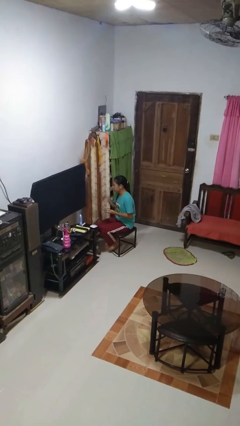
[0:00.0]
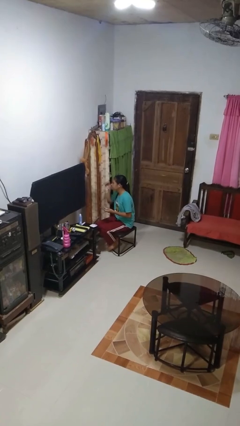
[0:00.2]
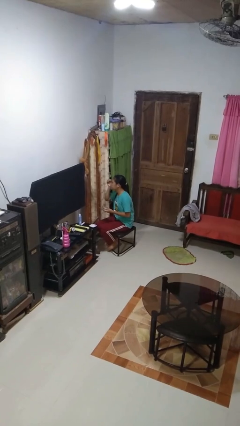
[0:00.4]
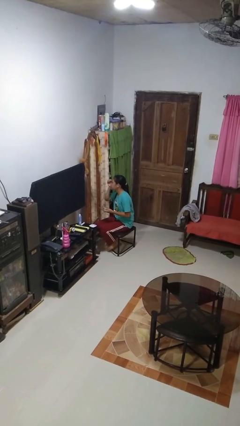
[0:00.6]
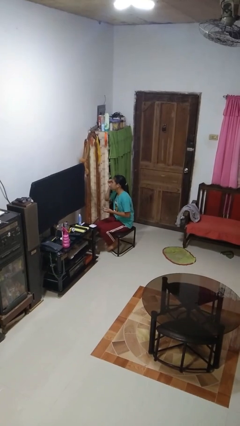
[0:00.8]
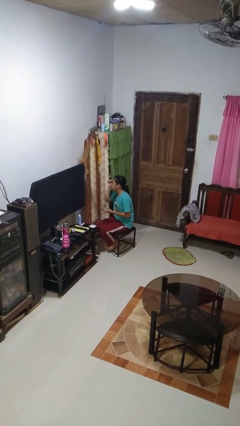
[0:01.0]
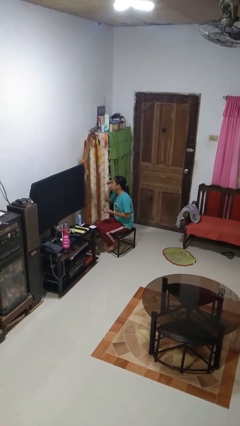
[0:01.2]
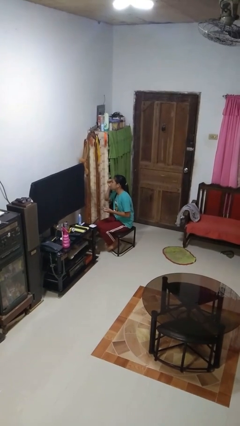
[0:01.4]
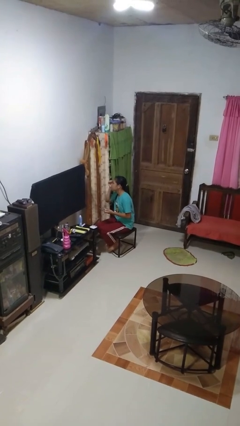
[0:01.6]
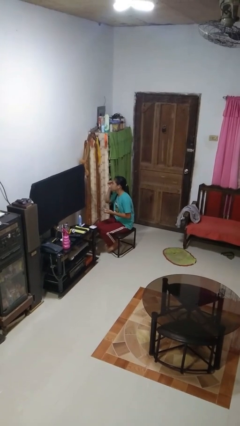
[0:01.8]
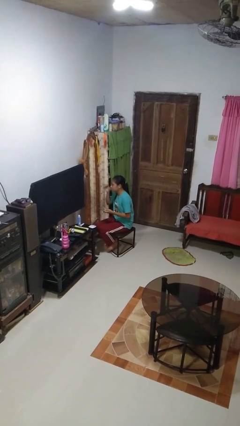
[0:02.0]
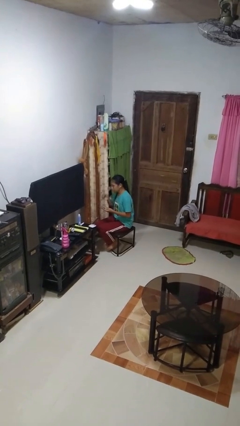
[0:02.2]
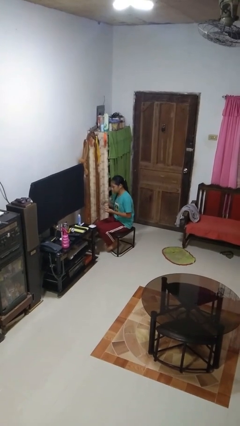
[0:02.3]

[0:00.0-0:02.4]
person applies eye makeup

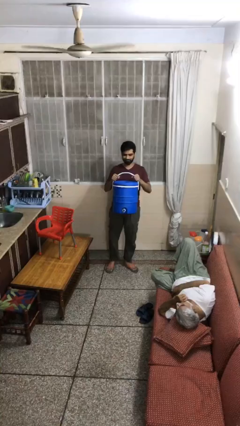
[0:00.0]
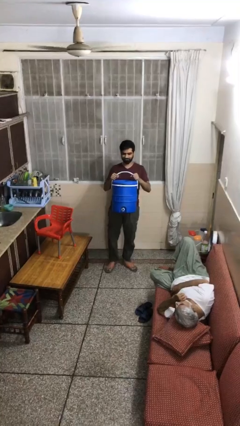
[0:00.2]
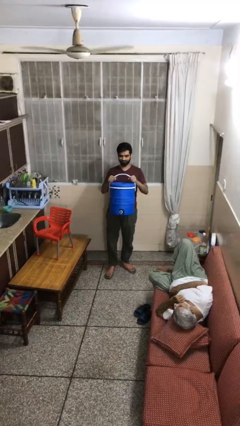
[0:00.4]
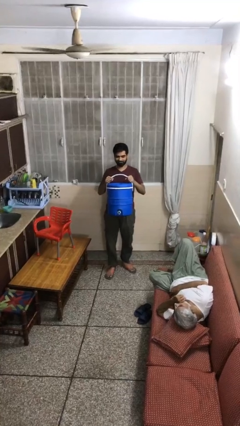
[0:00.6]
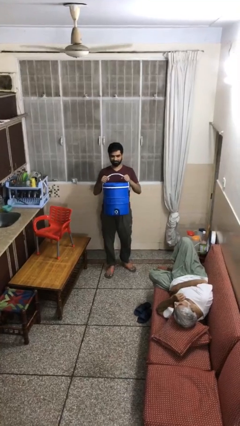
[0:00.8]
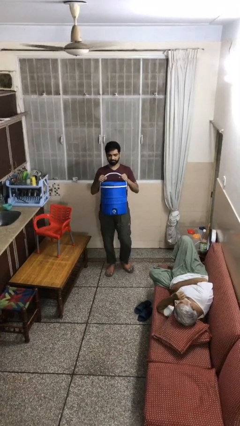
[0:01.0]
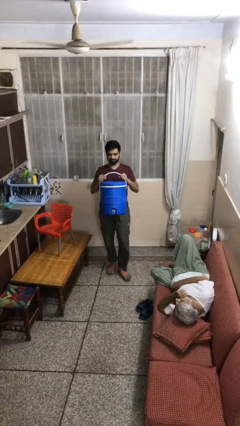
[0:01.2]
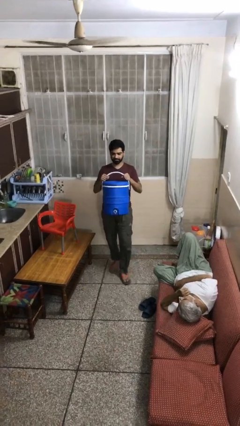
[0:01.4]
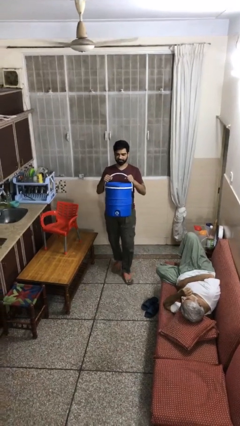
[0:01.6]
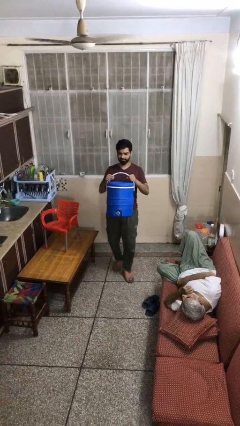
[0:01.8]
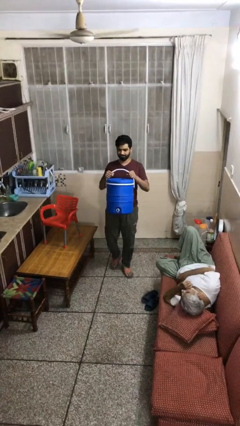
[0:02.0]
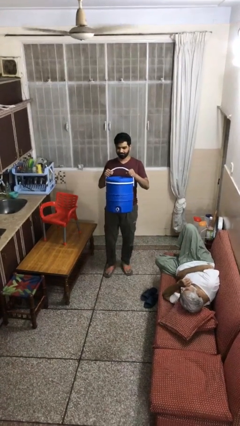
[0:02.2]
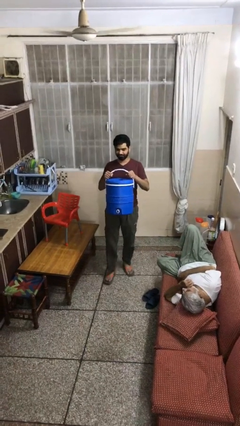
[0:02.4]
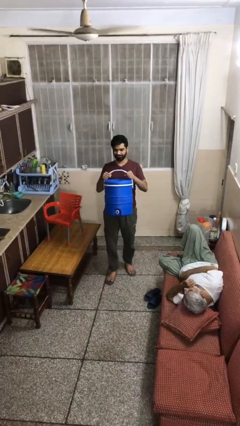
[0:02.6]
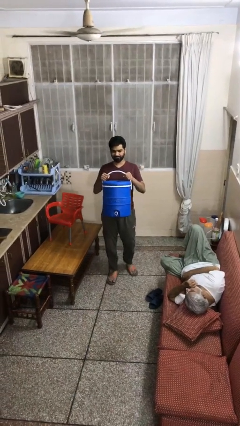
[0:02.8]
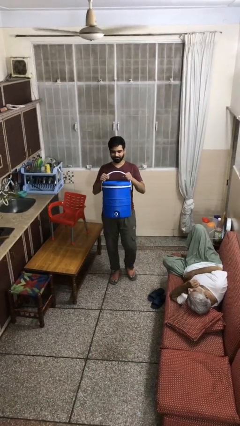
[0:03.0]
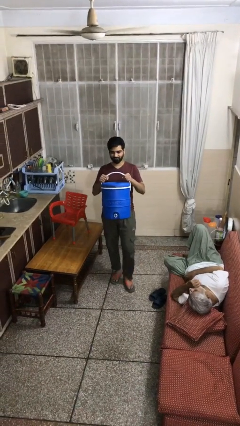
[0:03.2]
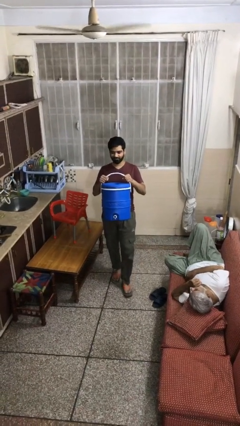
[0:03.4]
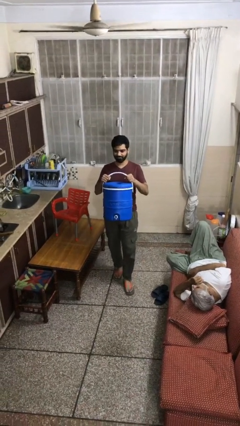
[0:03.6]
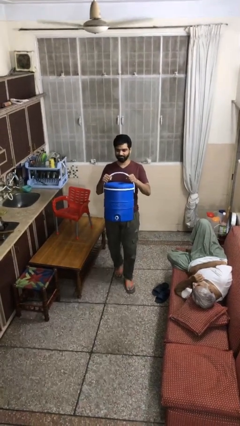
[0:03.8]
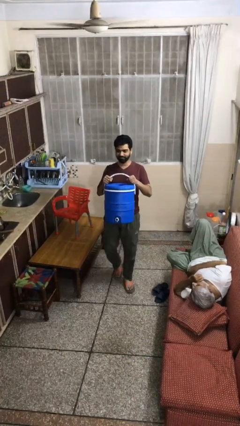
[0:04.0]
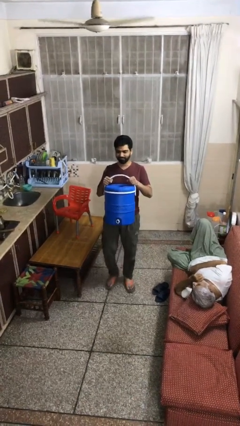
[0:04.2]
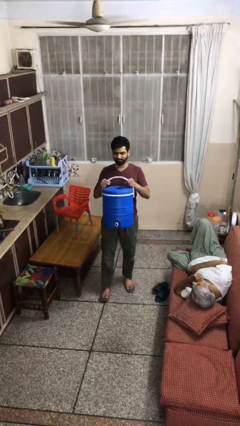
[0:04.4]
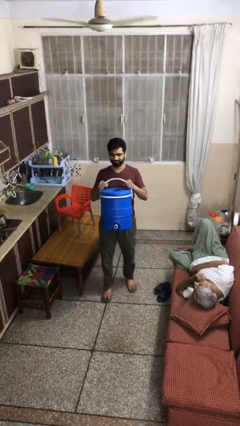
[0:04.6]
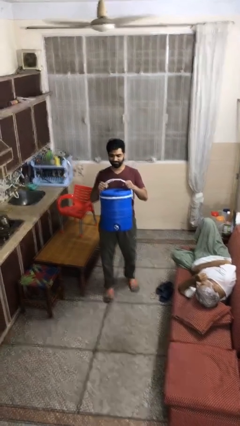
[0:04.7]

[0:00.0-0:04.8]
person carries heavy object

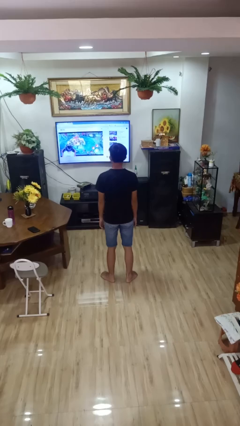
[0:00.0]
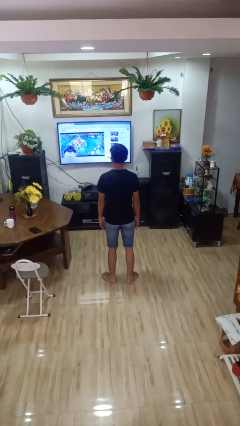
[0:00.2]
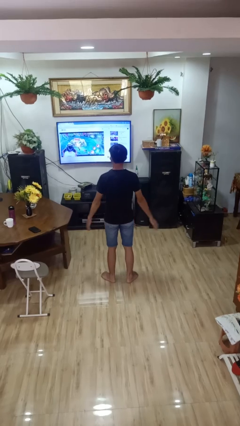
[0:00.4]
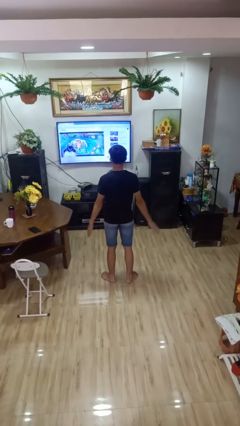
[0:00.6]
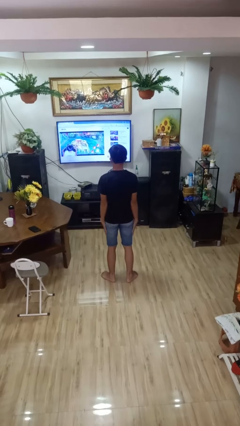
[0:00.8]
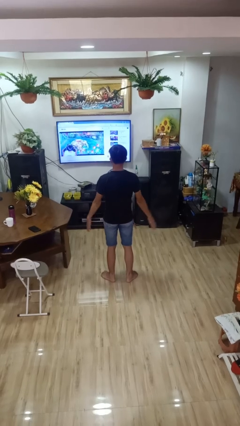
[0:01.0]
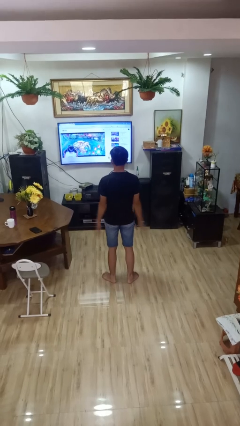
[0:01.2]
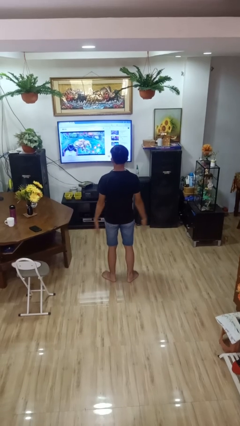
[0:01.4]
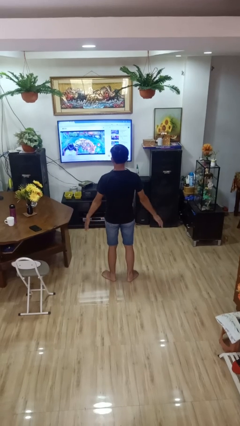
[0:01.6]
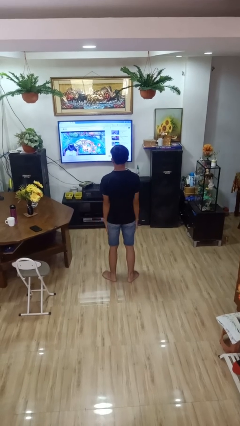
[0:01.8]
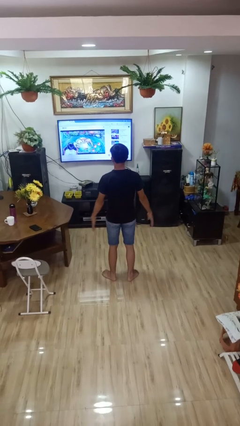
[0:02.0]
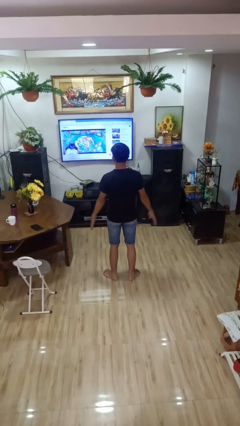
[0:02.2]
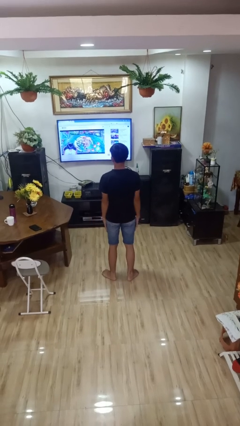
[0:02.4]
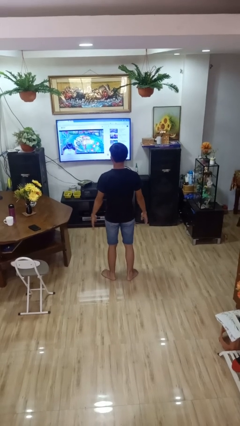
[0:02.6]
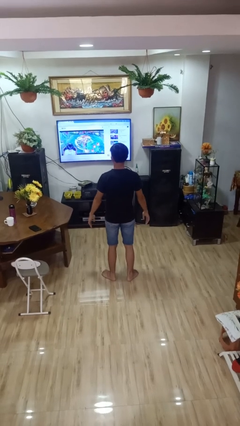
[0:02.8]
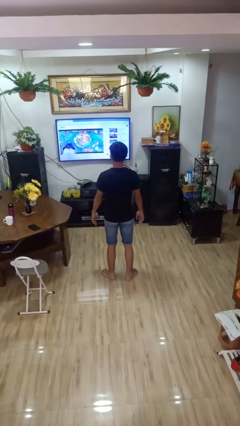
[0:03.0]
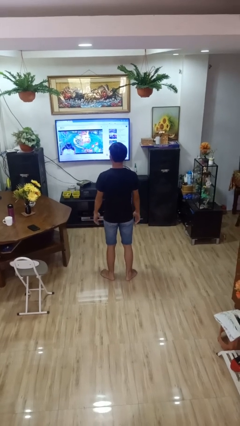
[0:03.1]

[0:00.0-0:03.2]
person slaps hands on thighs

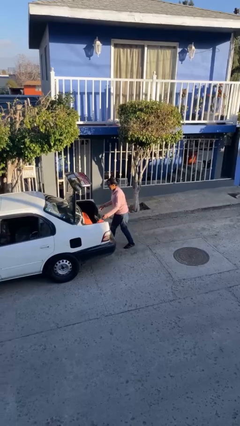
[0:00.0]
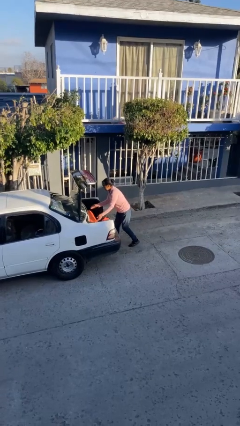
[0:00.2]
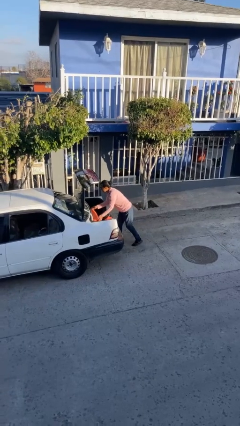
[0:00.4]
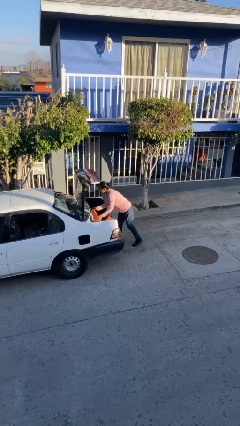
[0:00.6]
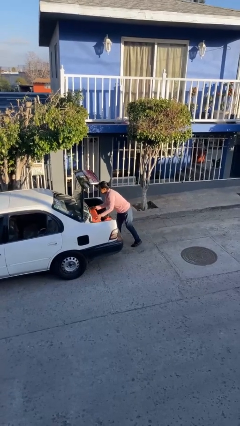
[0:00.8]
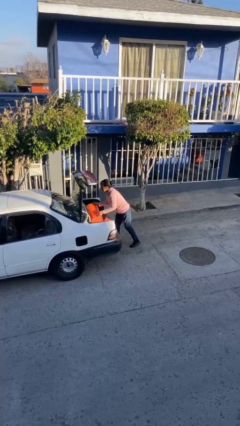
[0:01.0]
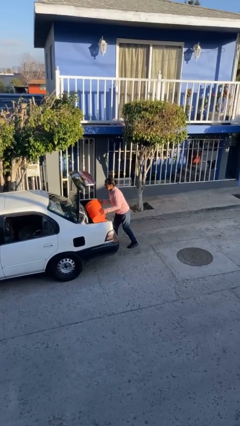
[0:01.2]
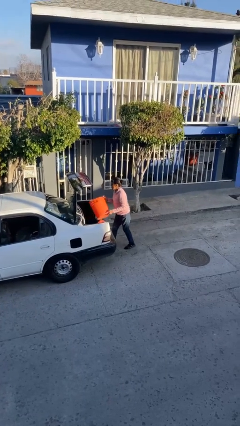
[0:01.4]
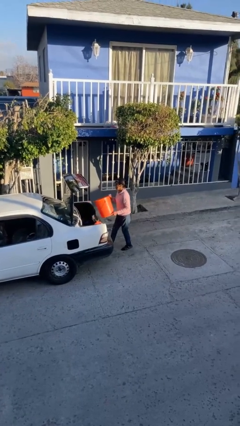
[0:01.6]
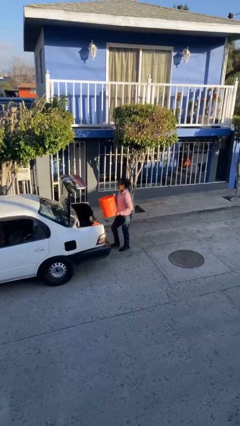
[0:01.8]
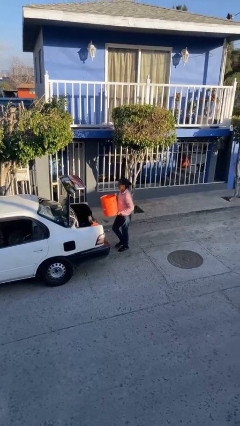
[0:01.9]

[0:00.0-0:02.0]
person unloads car

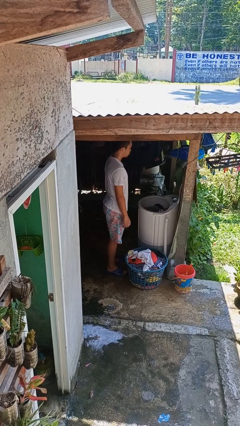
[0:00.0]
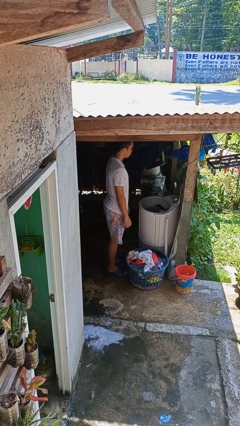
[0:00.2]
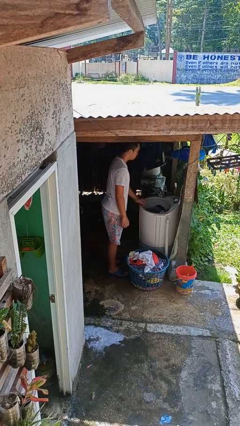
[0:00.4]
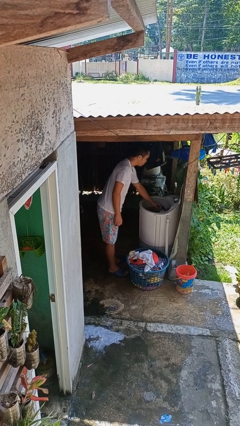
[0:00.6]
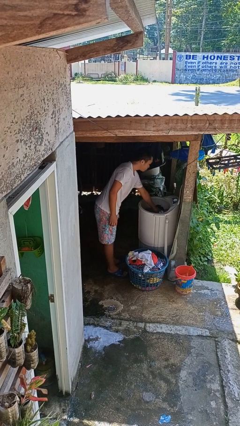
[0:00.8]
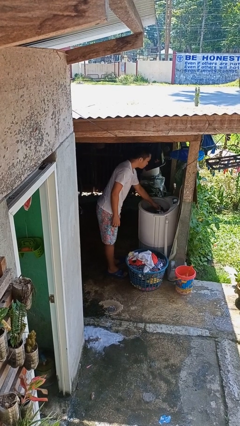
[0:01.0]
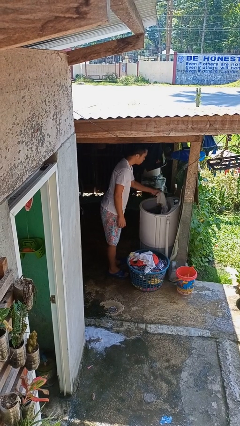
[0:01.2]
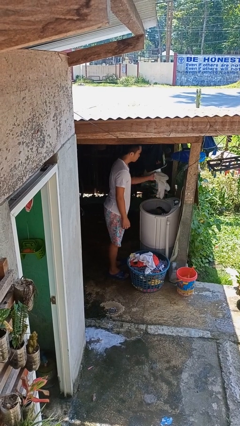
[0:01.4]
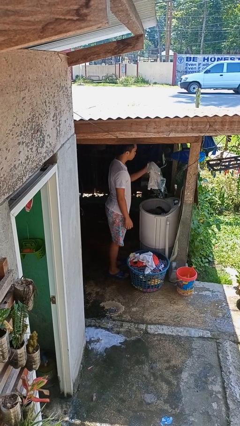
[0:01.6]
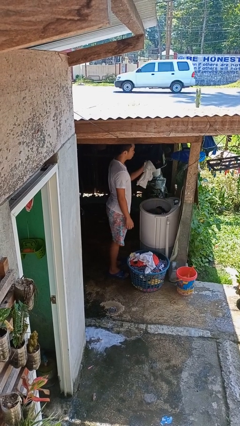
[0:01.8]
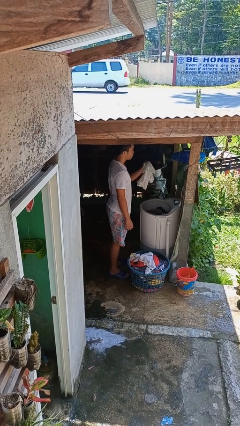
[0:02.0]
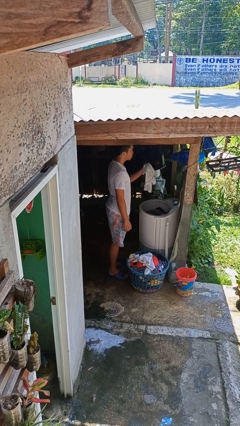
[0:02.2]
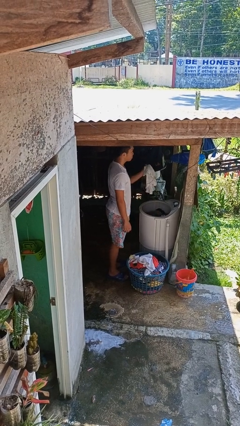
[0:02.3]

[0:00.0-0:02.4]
person unloads clotheswasher

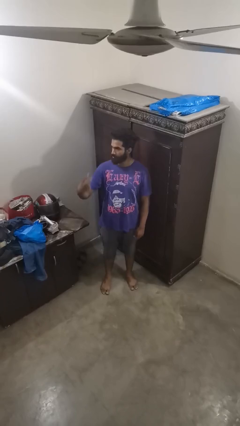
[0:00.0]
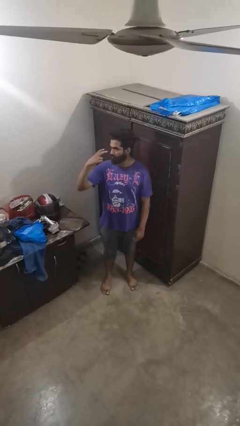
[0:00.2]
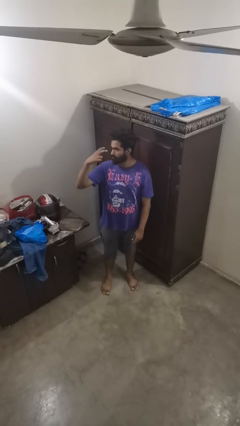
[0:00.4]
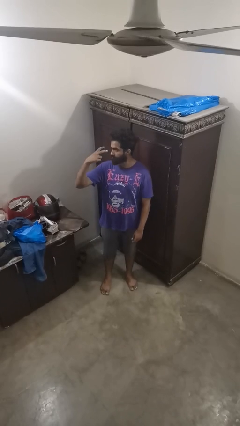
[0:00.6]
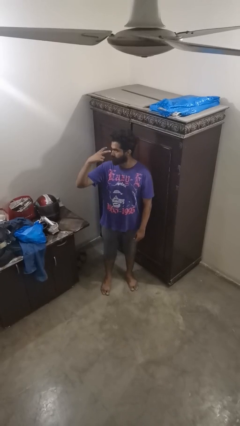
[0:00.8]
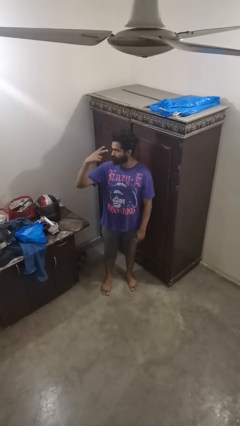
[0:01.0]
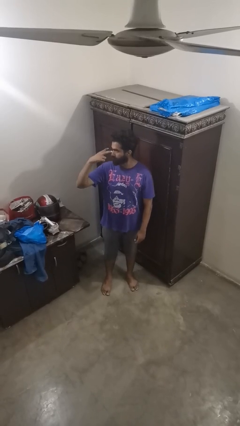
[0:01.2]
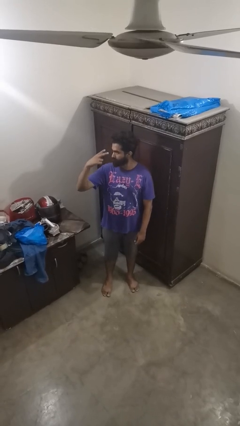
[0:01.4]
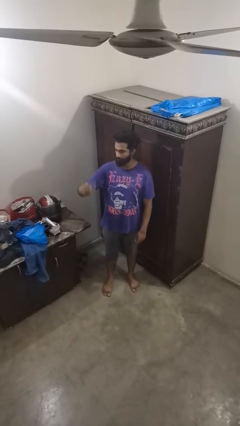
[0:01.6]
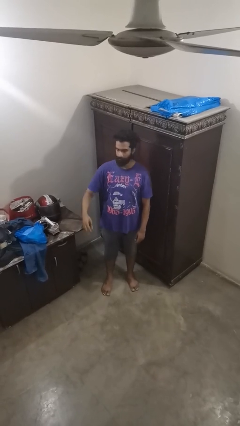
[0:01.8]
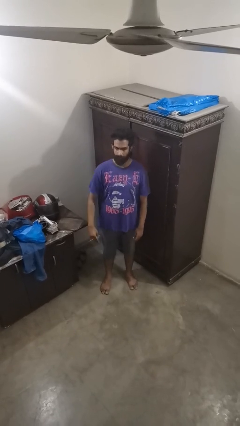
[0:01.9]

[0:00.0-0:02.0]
person gestures watch closely

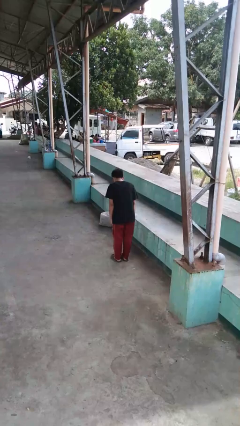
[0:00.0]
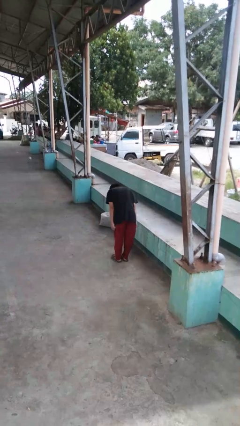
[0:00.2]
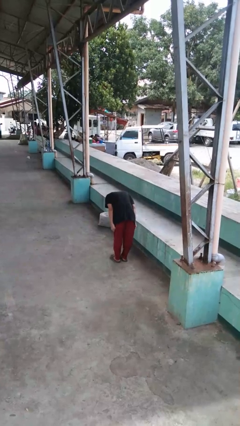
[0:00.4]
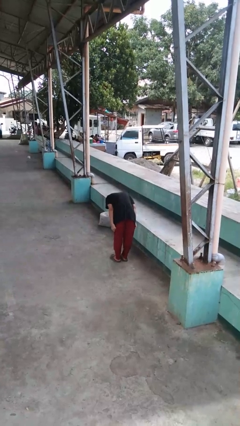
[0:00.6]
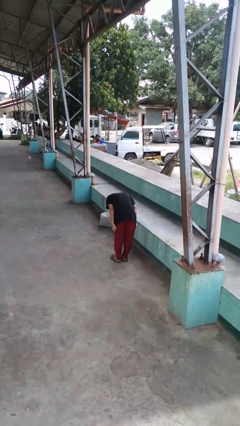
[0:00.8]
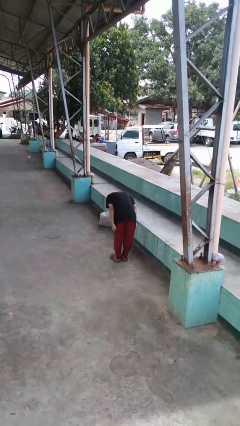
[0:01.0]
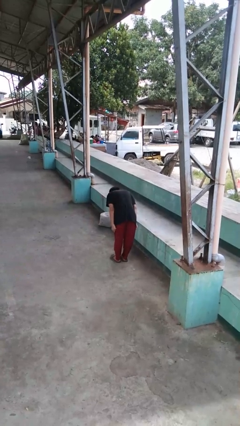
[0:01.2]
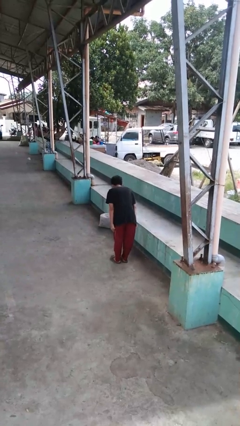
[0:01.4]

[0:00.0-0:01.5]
person bows
